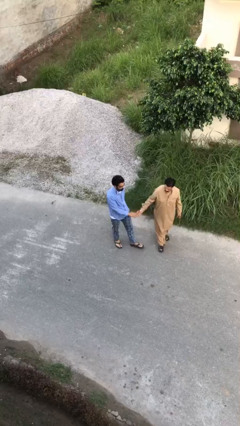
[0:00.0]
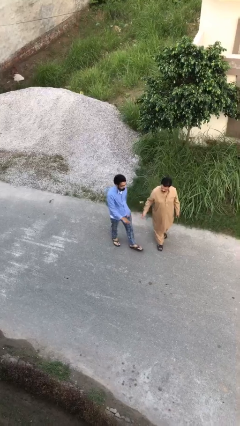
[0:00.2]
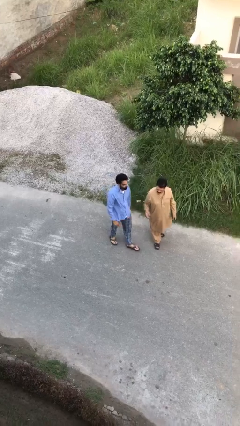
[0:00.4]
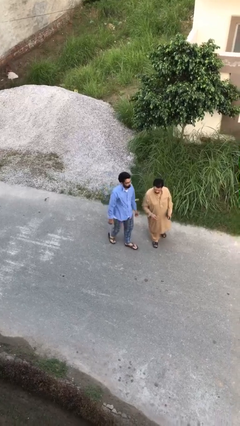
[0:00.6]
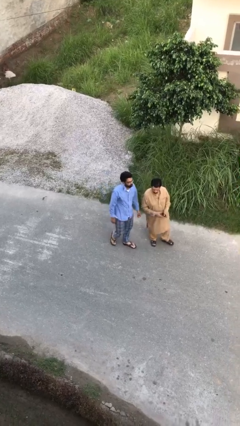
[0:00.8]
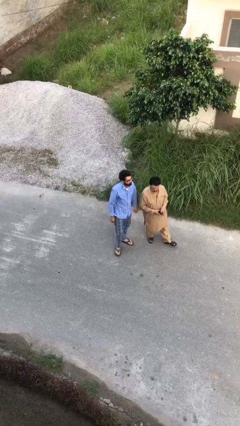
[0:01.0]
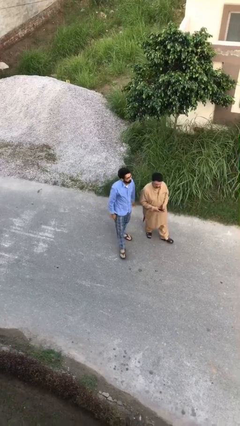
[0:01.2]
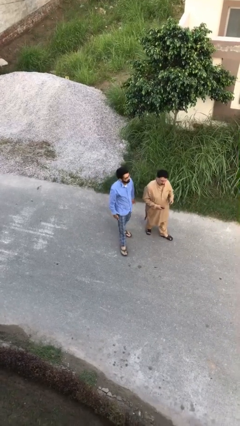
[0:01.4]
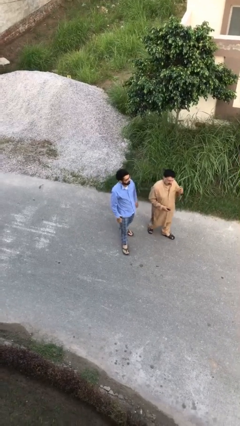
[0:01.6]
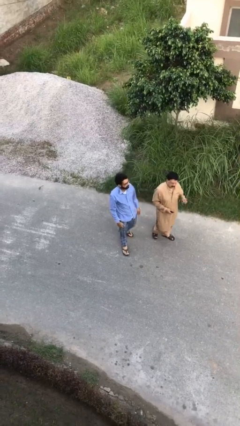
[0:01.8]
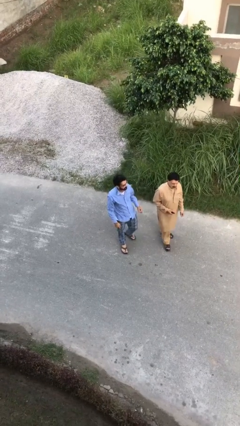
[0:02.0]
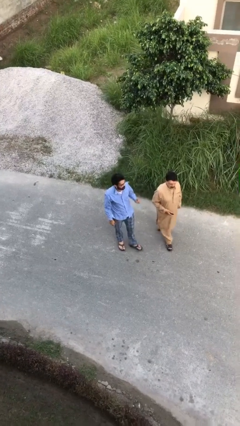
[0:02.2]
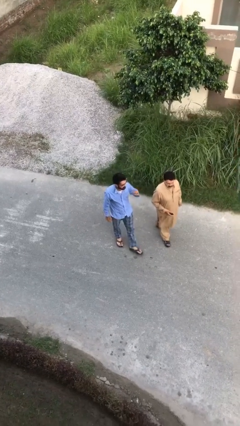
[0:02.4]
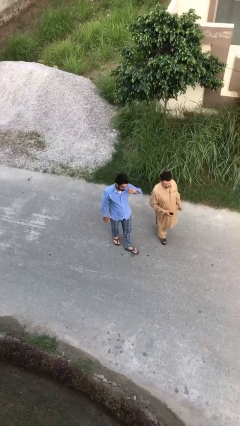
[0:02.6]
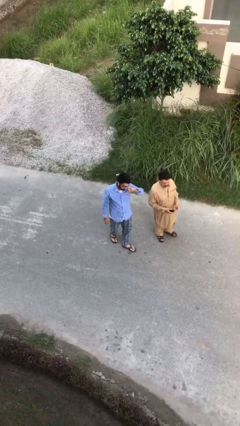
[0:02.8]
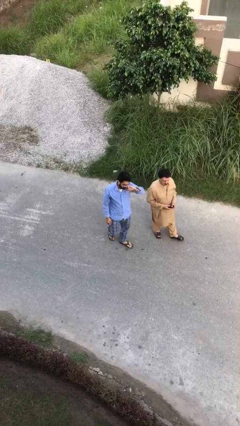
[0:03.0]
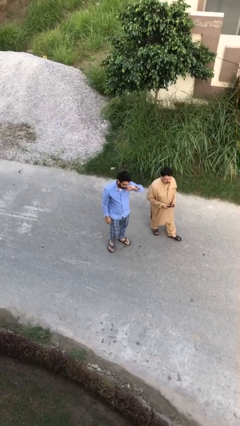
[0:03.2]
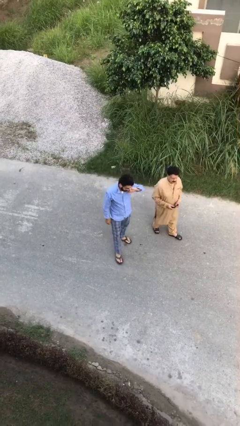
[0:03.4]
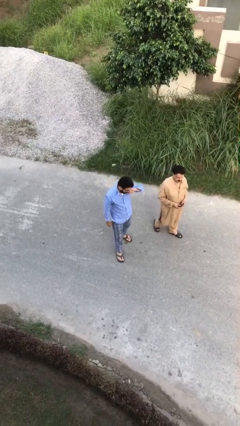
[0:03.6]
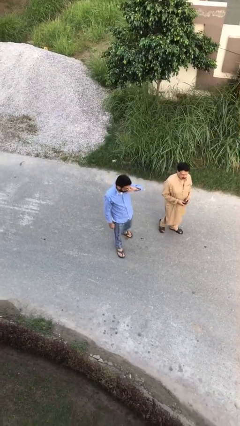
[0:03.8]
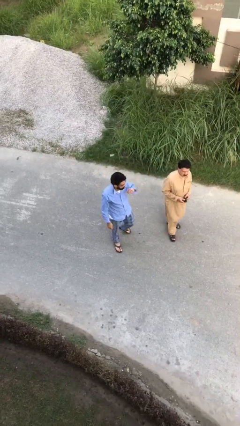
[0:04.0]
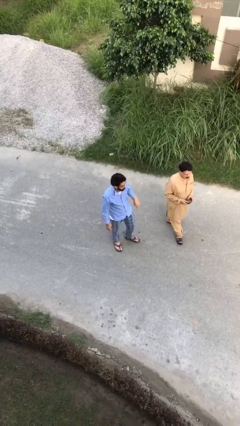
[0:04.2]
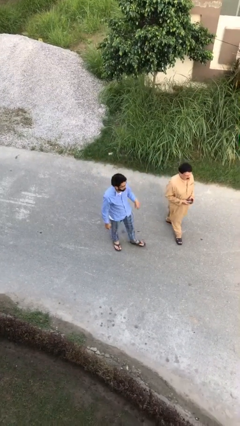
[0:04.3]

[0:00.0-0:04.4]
person talks to person

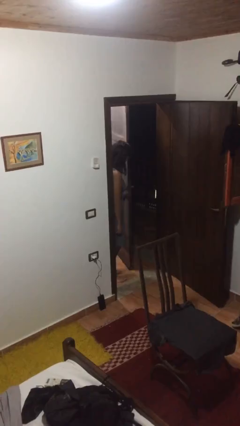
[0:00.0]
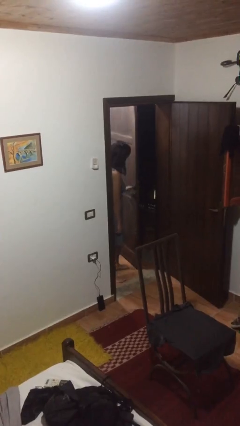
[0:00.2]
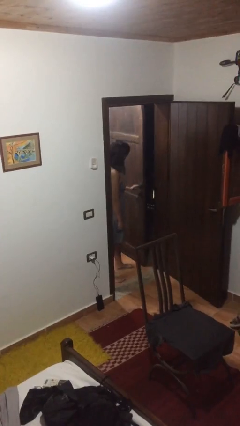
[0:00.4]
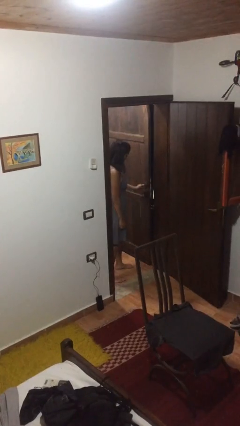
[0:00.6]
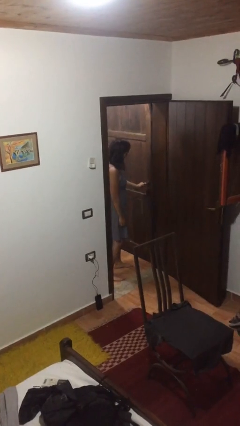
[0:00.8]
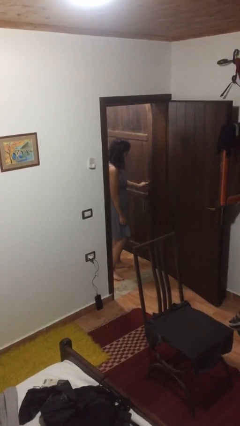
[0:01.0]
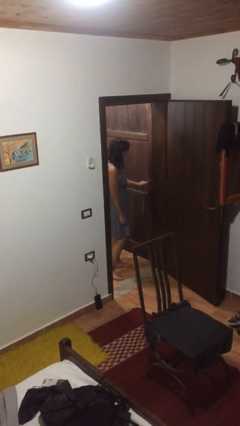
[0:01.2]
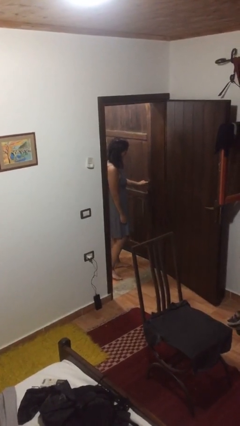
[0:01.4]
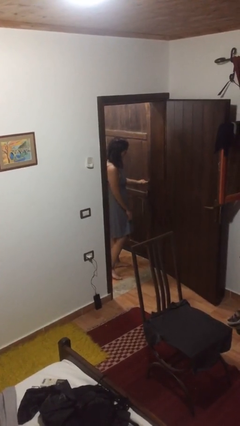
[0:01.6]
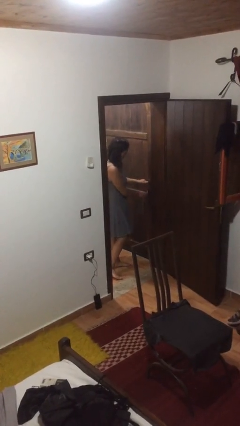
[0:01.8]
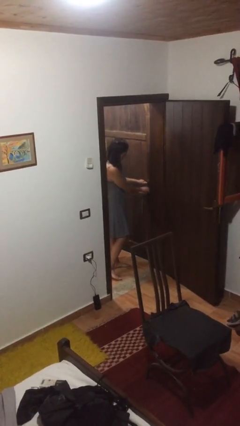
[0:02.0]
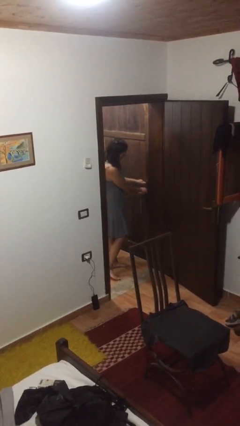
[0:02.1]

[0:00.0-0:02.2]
person closes facility door

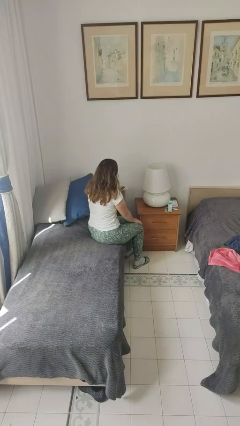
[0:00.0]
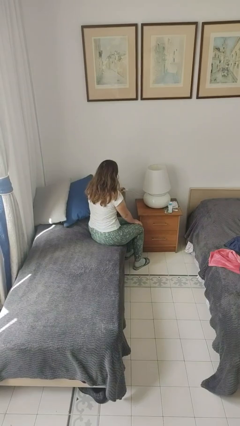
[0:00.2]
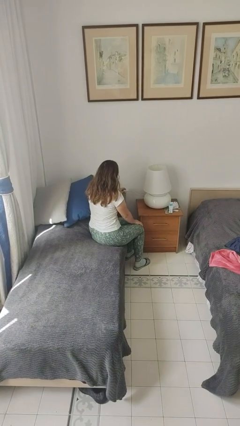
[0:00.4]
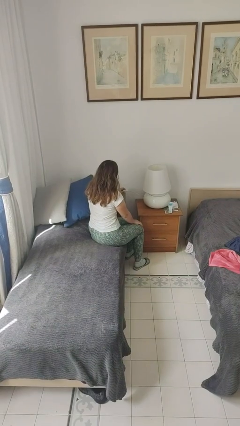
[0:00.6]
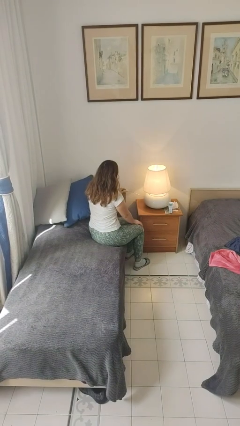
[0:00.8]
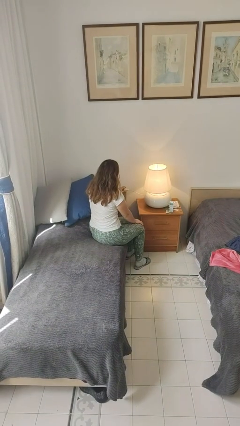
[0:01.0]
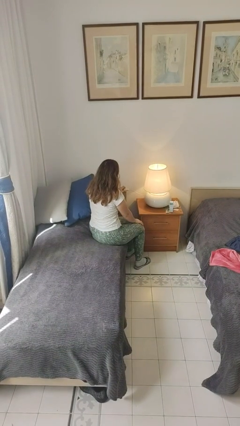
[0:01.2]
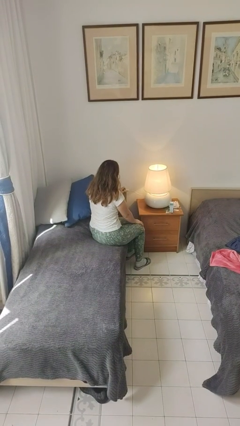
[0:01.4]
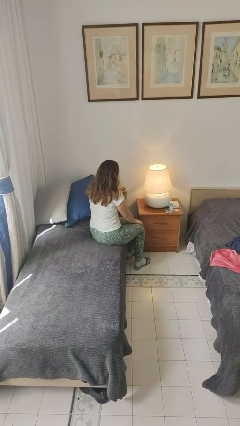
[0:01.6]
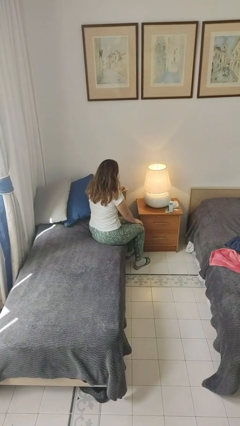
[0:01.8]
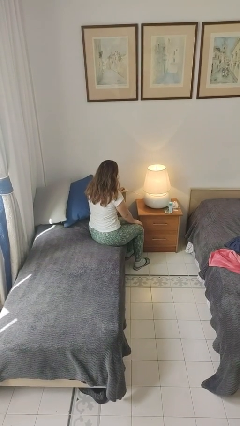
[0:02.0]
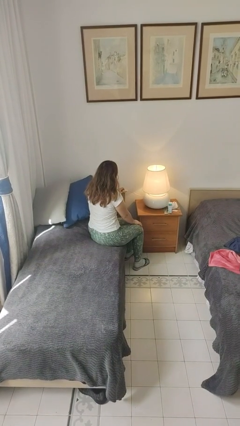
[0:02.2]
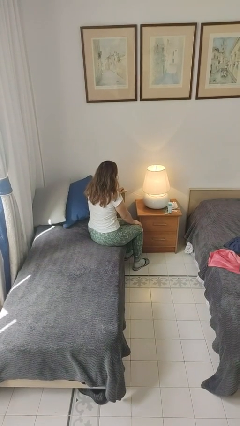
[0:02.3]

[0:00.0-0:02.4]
person turns on lamp

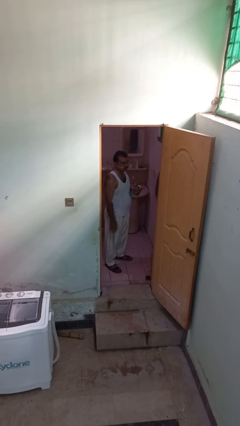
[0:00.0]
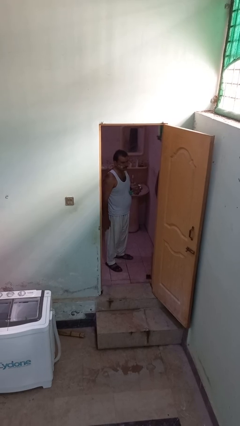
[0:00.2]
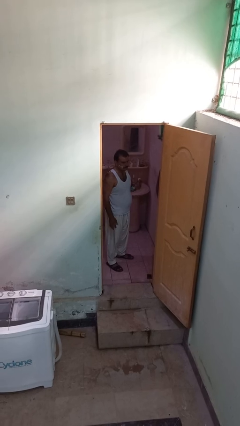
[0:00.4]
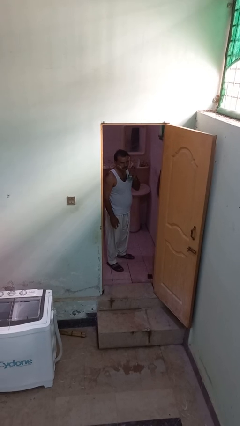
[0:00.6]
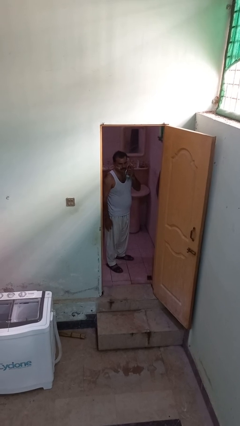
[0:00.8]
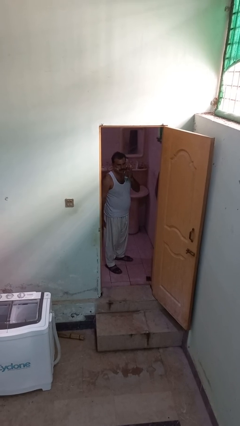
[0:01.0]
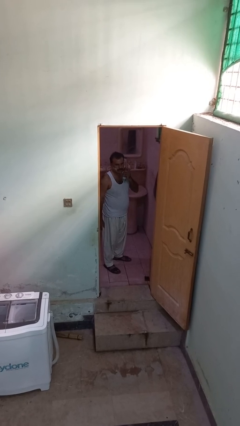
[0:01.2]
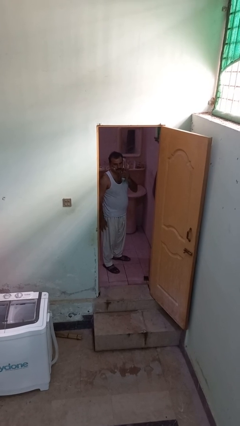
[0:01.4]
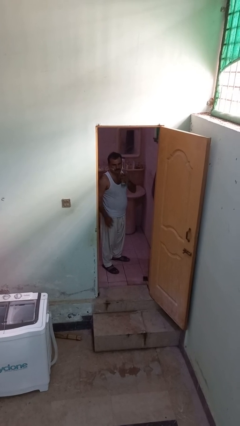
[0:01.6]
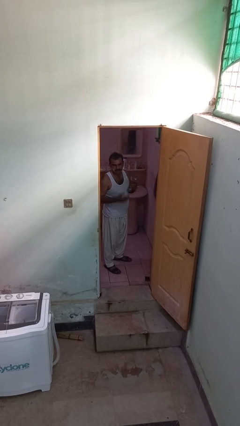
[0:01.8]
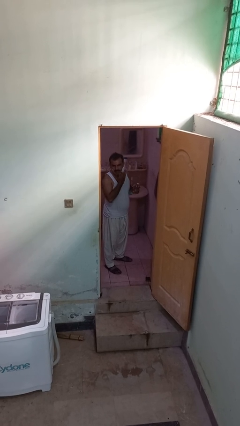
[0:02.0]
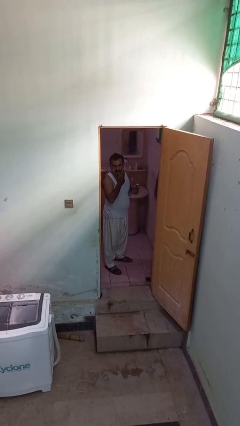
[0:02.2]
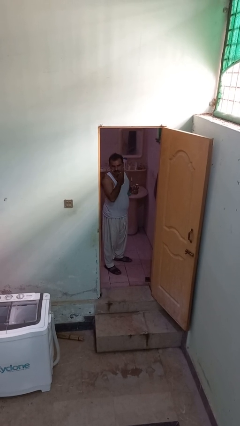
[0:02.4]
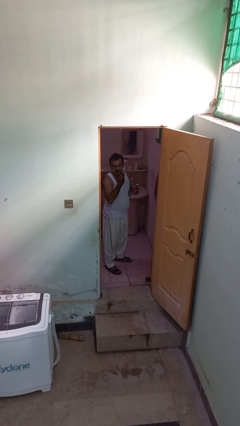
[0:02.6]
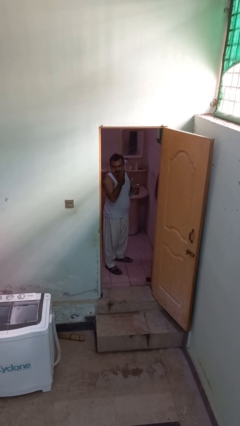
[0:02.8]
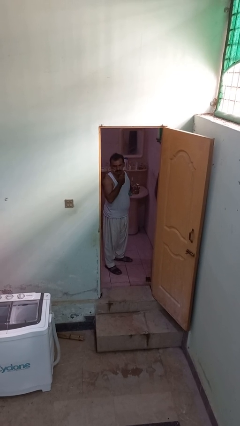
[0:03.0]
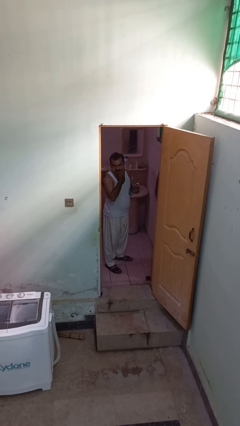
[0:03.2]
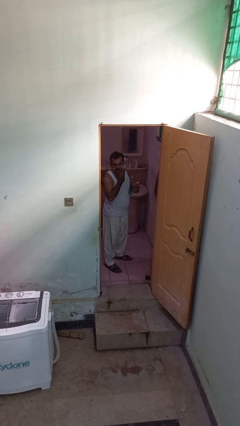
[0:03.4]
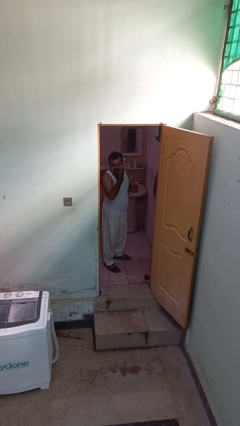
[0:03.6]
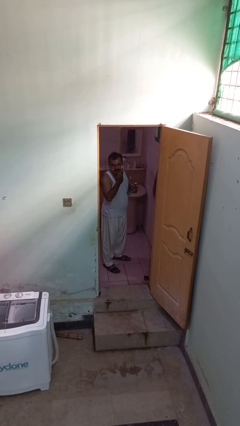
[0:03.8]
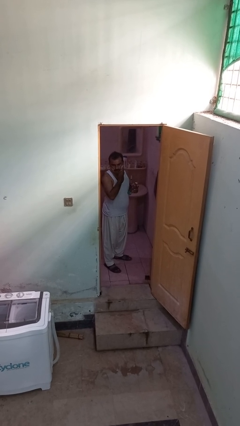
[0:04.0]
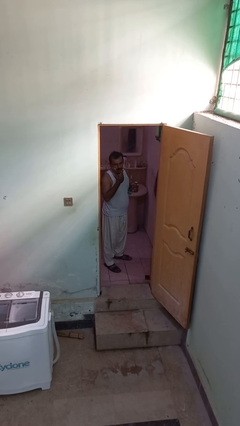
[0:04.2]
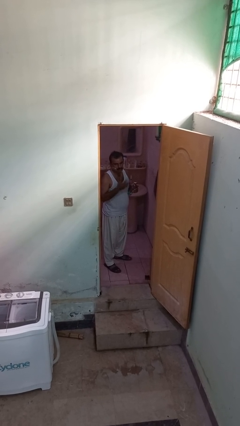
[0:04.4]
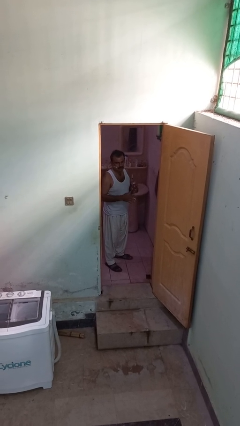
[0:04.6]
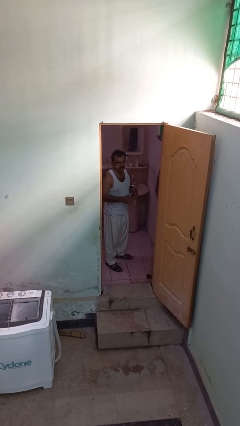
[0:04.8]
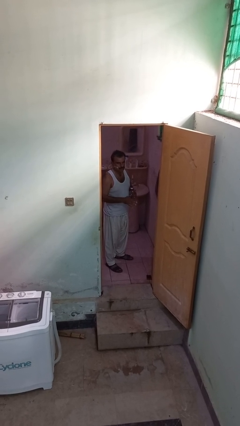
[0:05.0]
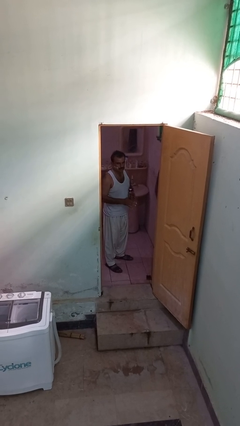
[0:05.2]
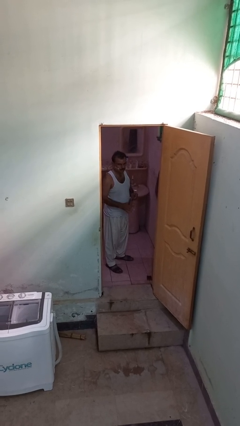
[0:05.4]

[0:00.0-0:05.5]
person applies shaving cream

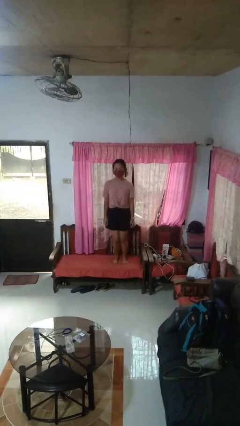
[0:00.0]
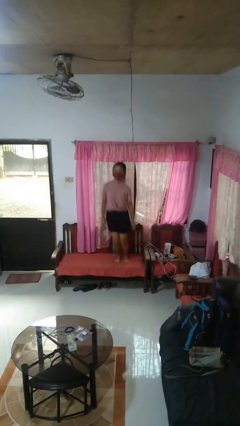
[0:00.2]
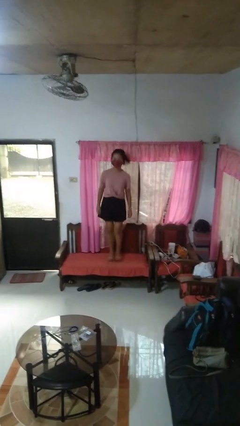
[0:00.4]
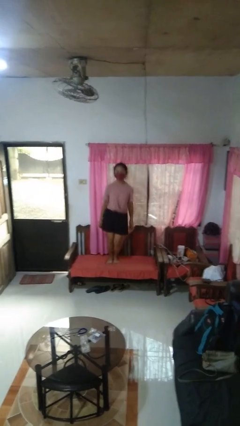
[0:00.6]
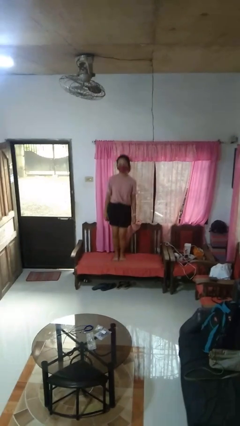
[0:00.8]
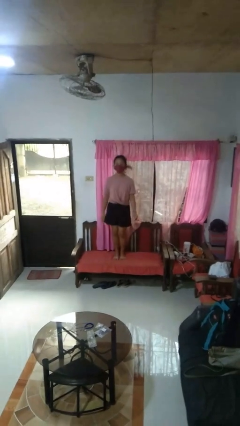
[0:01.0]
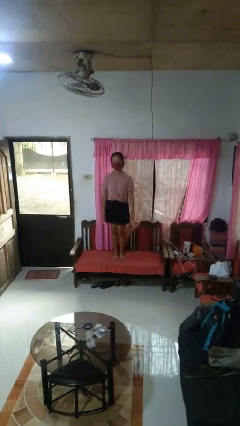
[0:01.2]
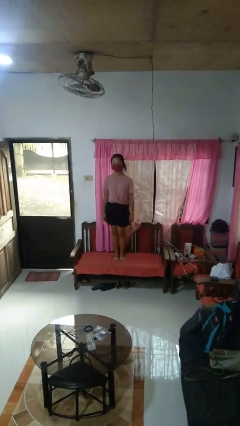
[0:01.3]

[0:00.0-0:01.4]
person jumps on couch

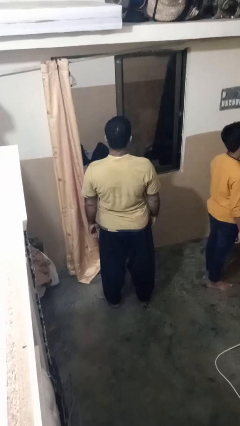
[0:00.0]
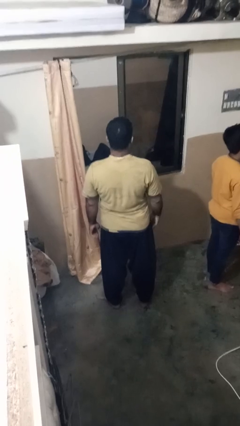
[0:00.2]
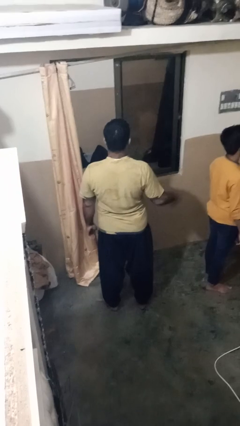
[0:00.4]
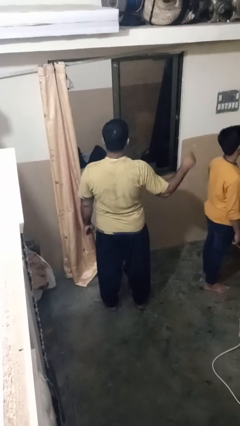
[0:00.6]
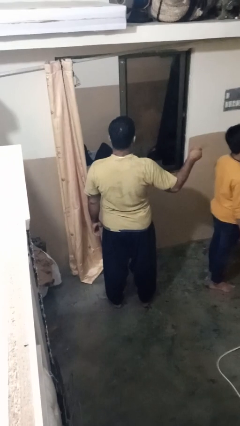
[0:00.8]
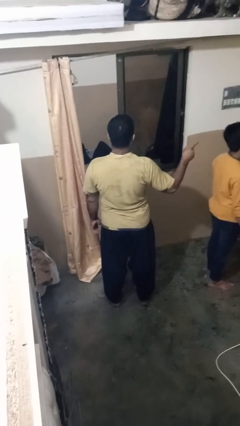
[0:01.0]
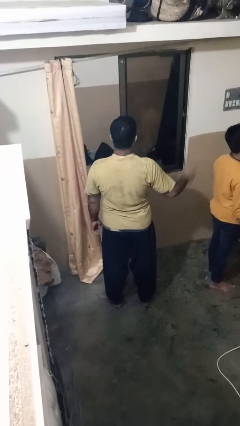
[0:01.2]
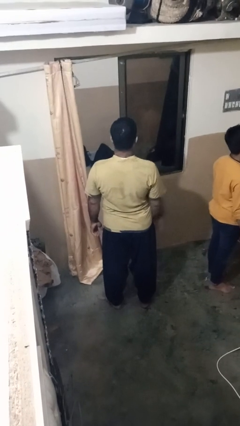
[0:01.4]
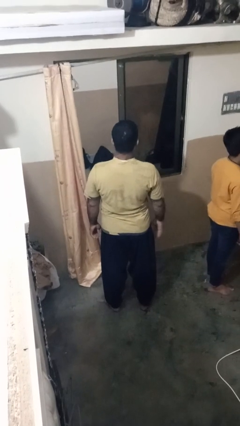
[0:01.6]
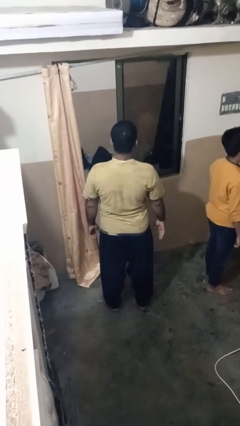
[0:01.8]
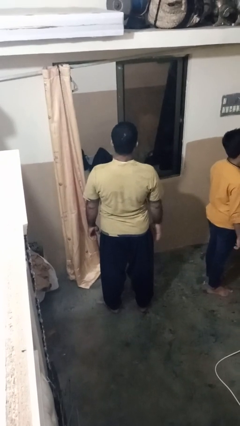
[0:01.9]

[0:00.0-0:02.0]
person points at person
